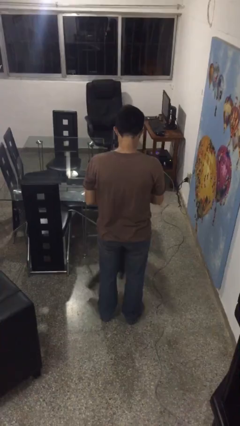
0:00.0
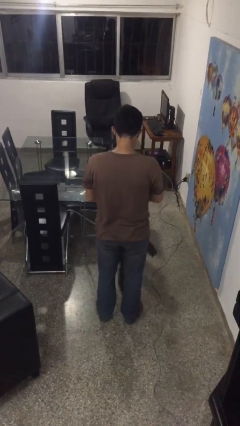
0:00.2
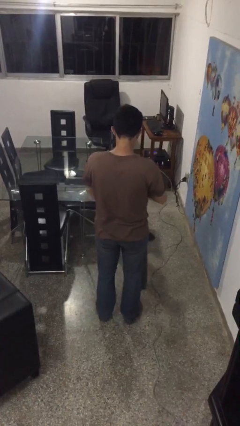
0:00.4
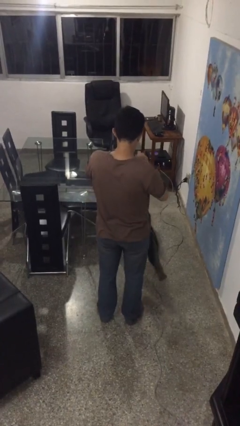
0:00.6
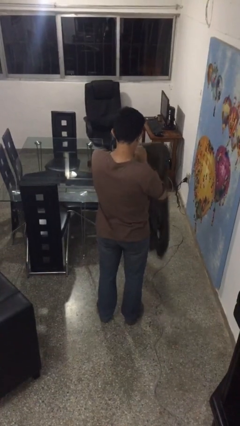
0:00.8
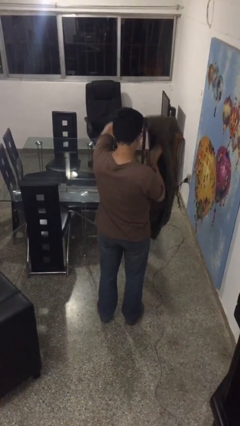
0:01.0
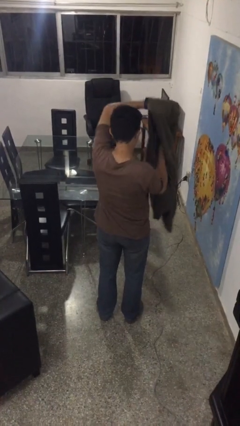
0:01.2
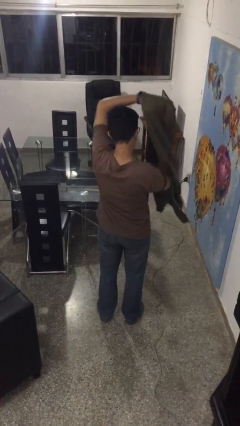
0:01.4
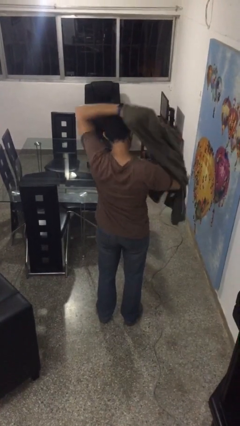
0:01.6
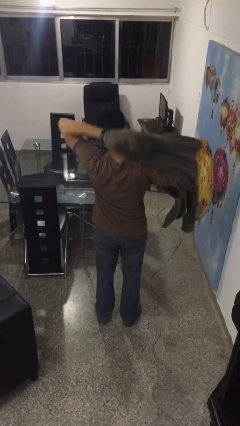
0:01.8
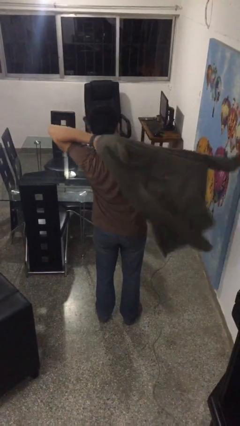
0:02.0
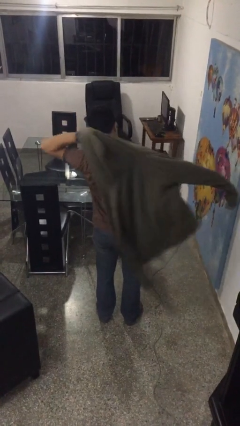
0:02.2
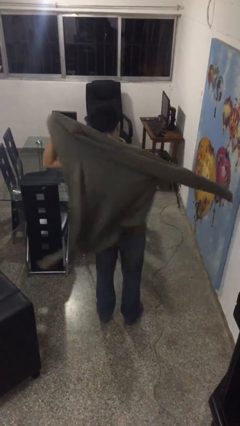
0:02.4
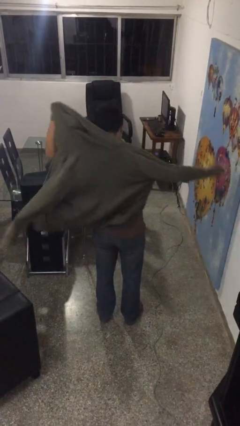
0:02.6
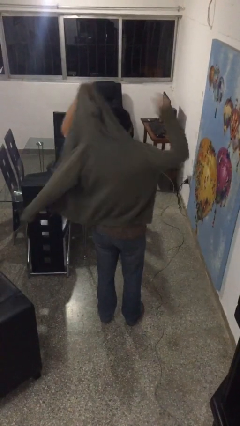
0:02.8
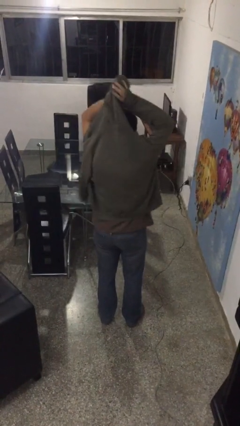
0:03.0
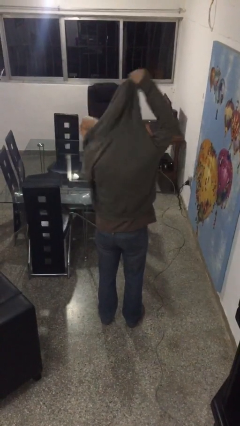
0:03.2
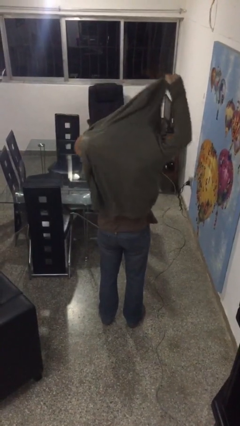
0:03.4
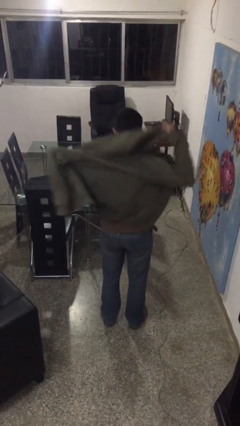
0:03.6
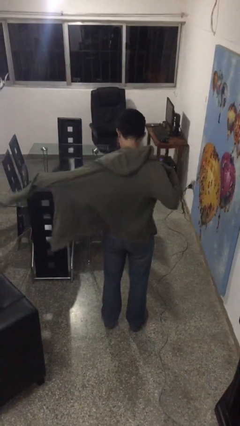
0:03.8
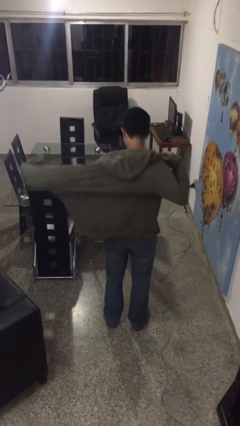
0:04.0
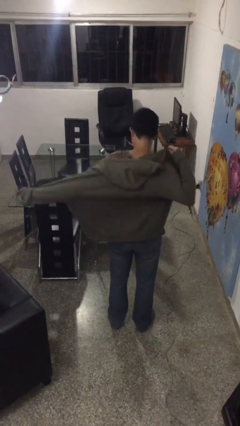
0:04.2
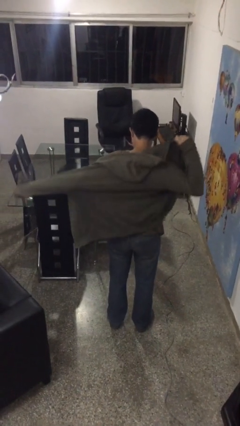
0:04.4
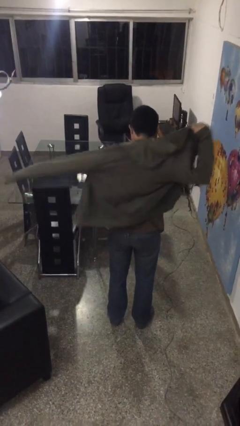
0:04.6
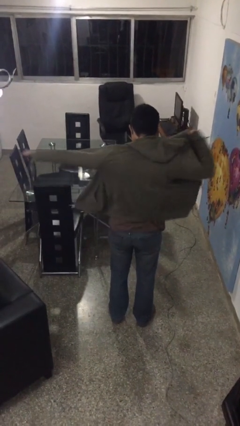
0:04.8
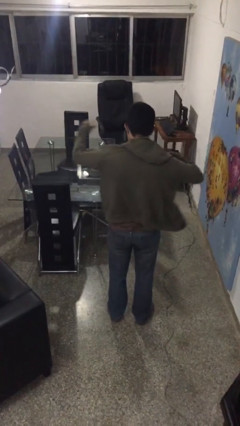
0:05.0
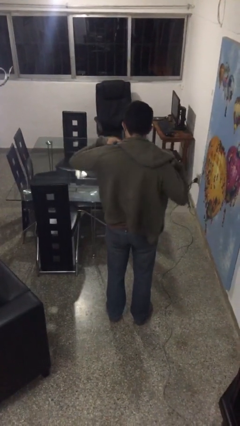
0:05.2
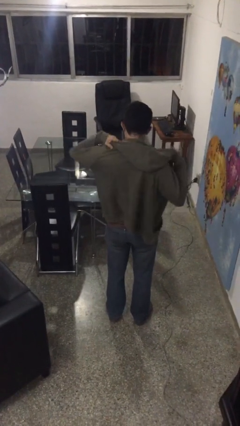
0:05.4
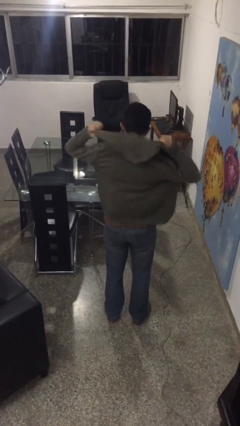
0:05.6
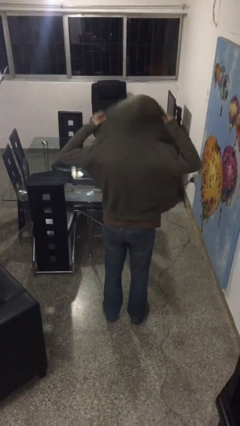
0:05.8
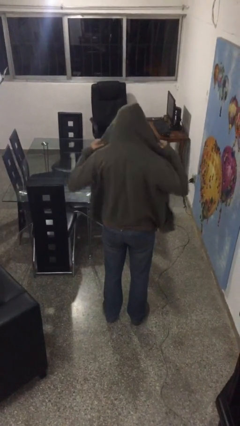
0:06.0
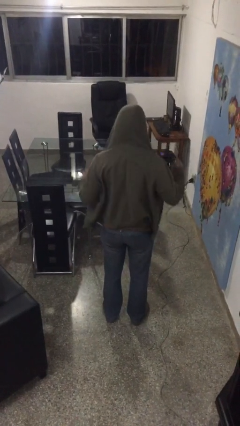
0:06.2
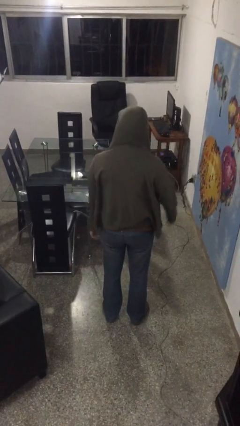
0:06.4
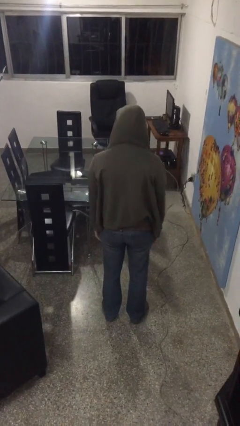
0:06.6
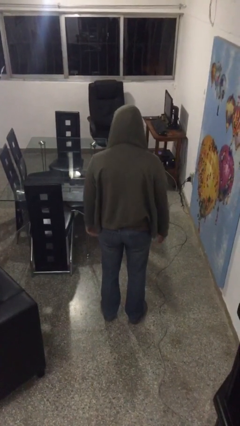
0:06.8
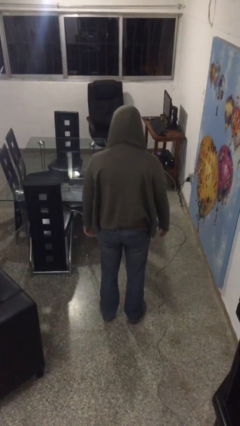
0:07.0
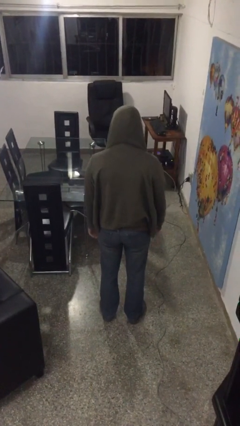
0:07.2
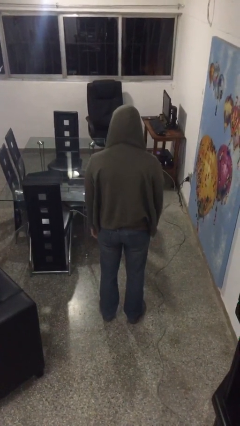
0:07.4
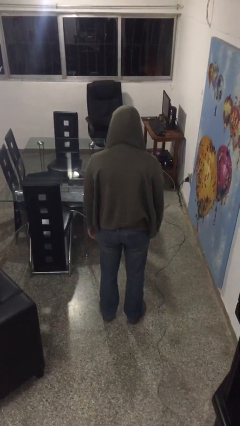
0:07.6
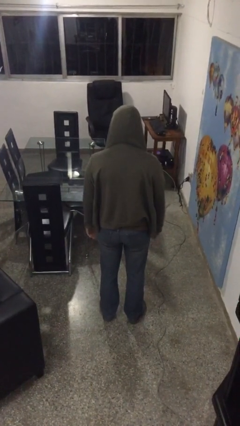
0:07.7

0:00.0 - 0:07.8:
person puts on hoodie

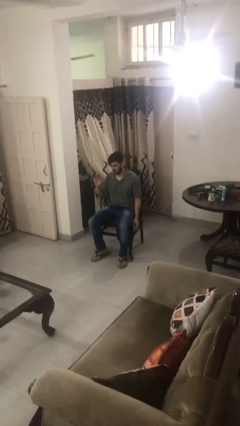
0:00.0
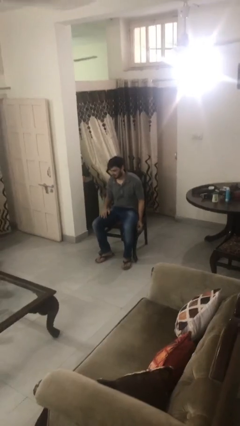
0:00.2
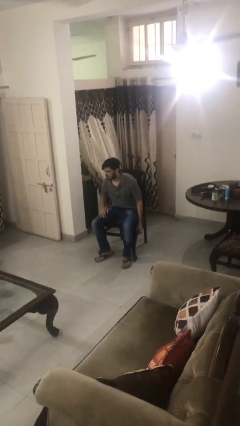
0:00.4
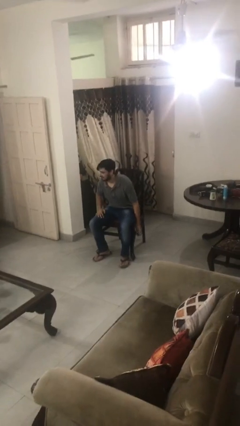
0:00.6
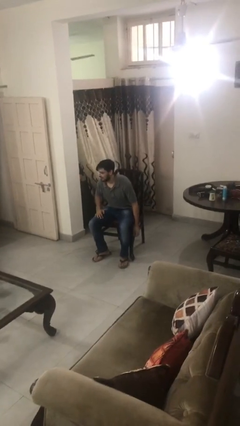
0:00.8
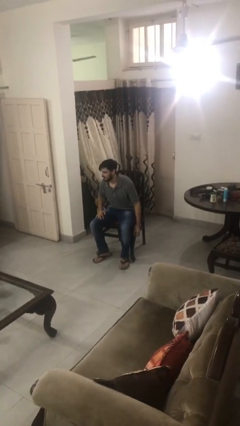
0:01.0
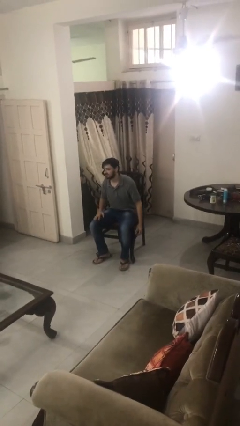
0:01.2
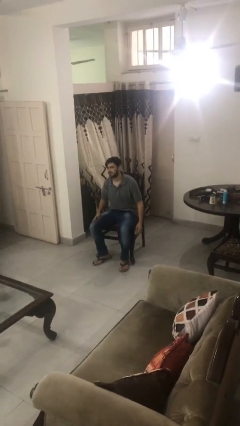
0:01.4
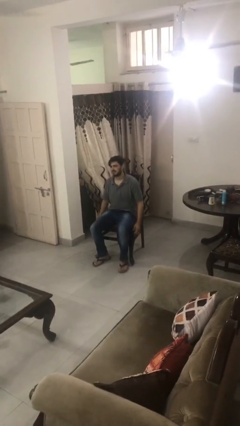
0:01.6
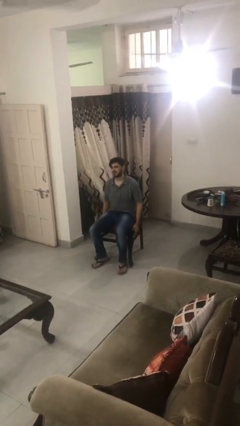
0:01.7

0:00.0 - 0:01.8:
person slaps hands on thighs

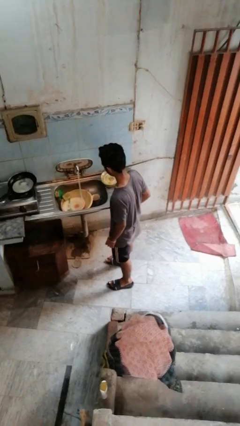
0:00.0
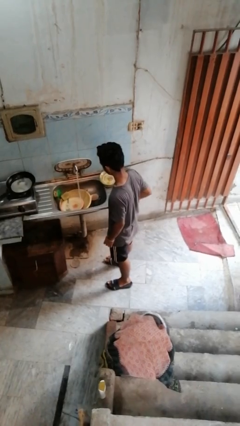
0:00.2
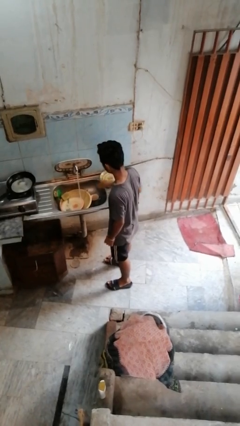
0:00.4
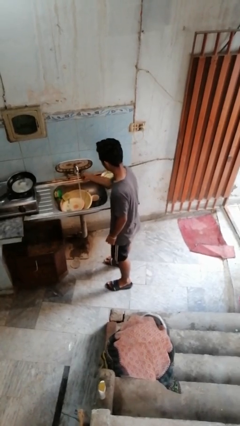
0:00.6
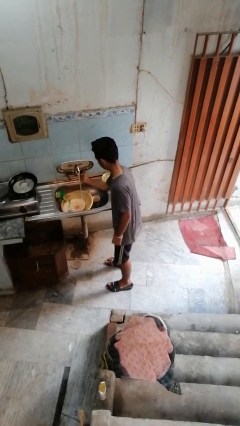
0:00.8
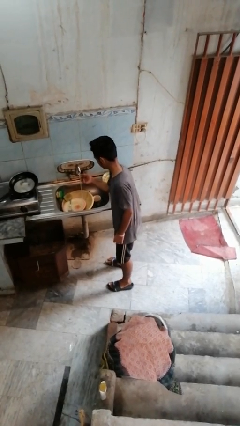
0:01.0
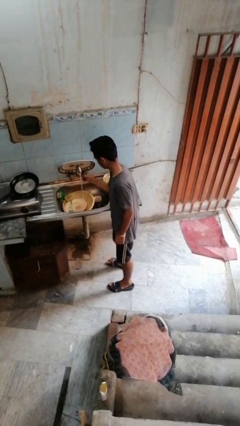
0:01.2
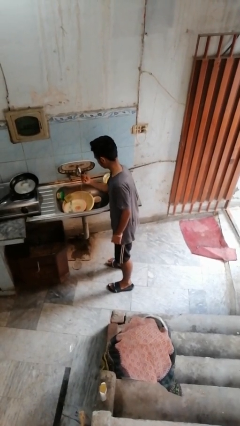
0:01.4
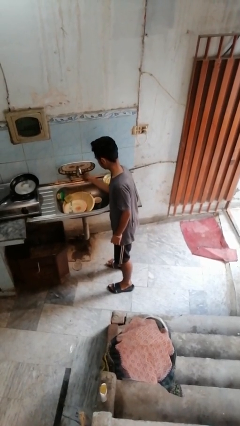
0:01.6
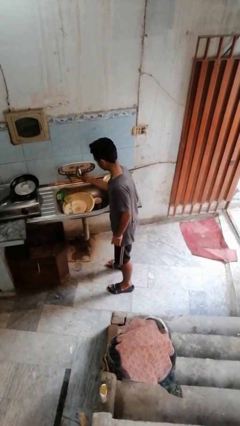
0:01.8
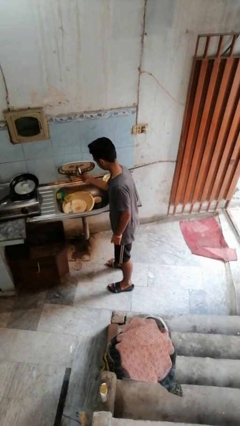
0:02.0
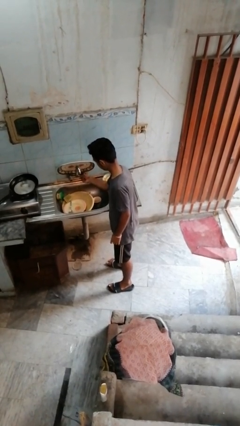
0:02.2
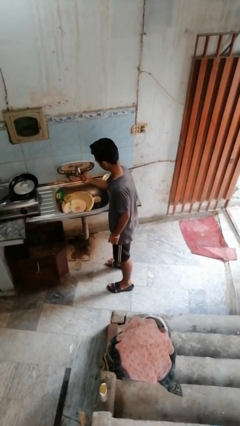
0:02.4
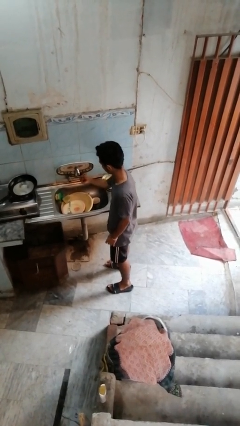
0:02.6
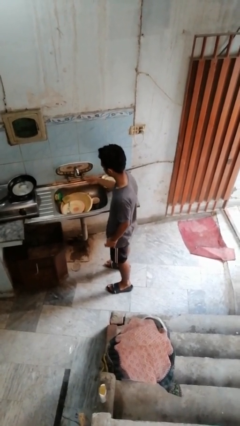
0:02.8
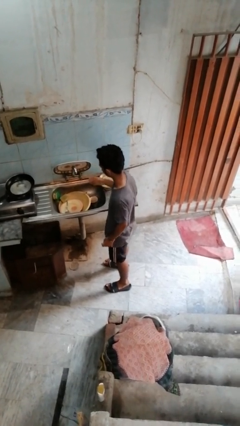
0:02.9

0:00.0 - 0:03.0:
person turns off faucet

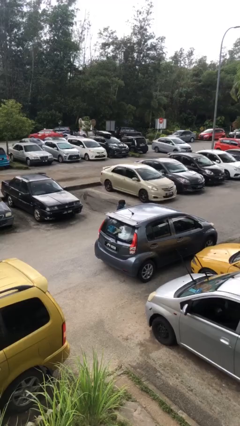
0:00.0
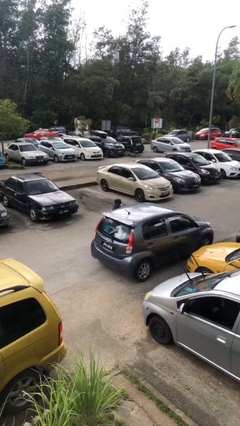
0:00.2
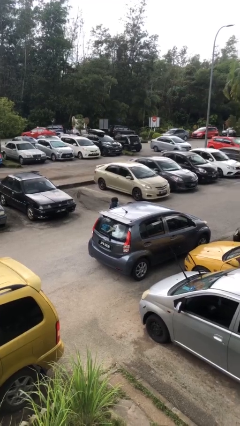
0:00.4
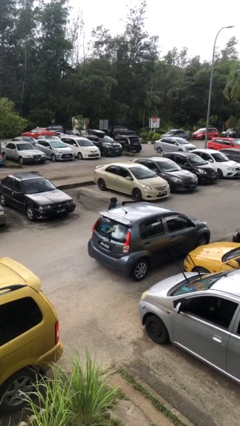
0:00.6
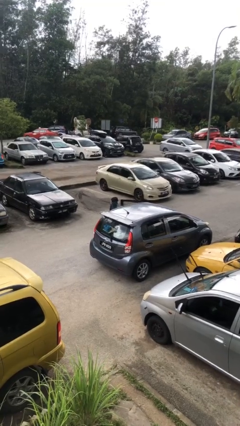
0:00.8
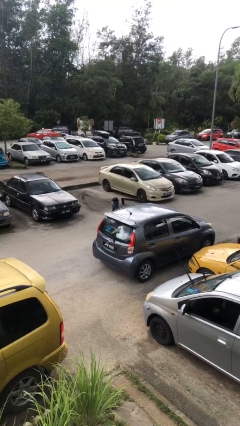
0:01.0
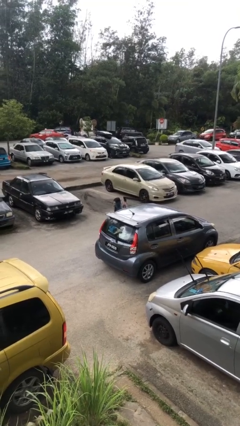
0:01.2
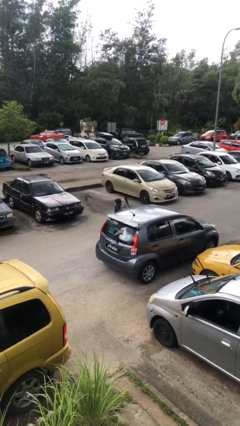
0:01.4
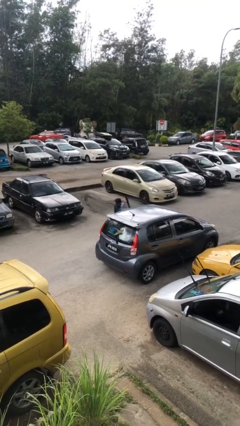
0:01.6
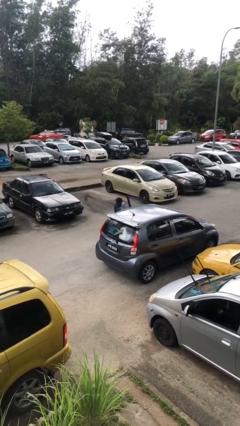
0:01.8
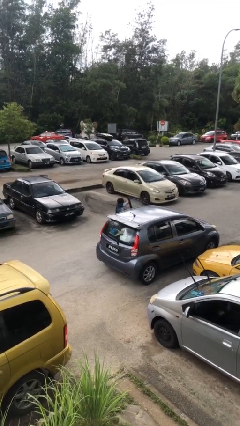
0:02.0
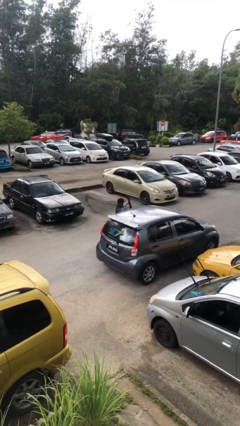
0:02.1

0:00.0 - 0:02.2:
person opens car door

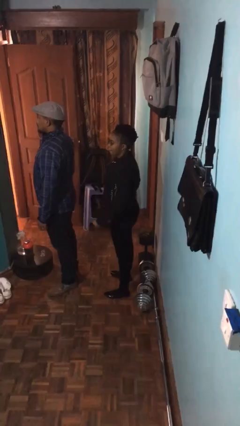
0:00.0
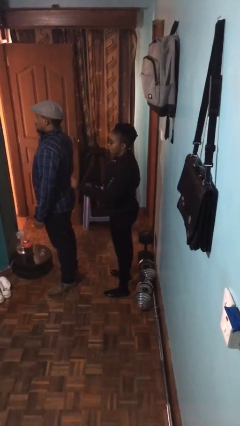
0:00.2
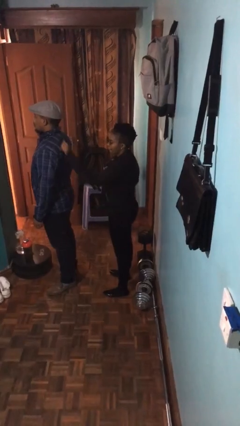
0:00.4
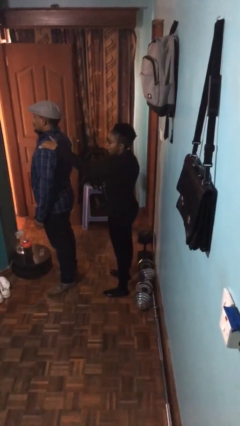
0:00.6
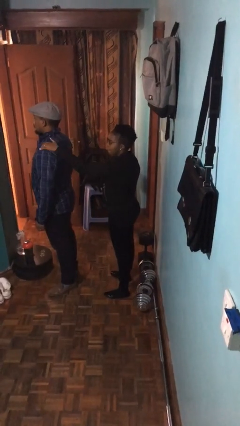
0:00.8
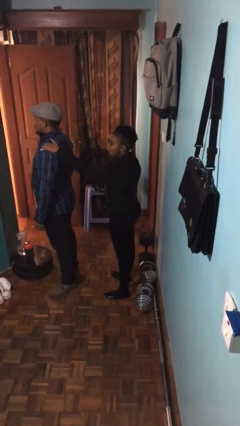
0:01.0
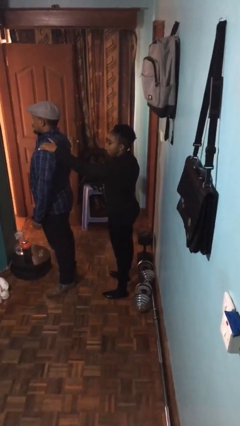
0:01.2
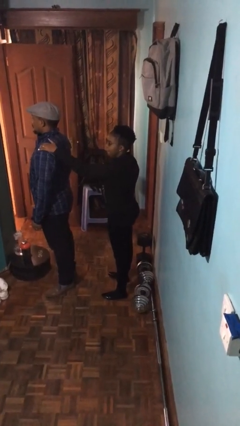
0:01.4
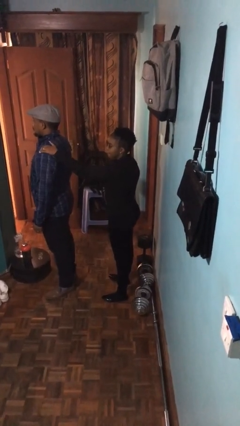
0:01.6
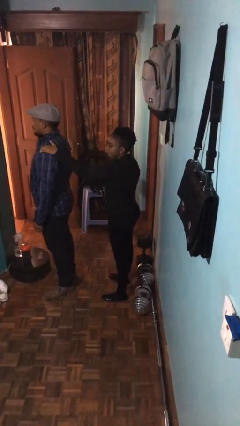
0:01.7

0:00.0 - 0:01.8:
person grabs person by shoulder

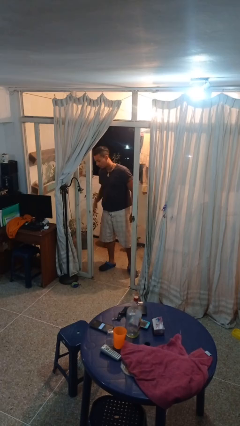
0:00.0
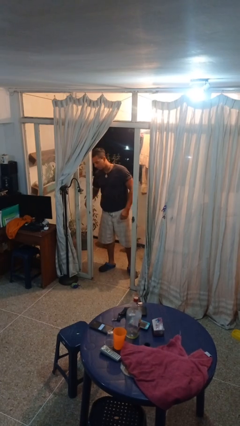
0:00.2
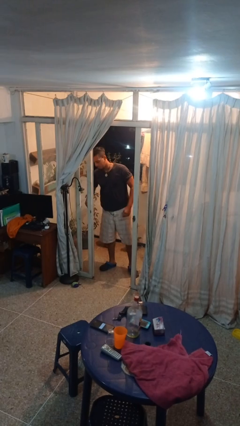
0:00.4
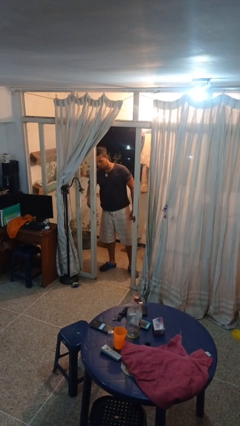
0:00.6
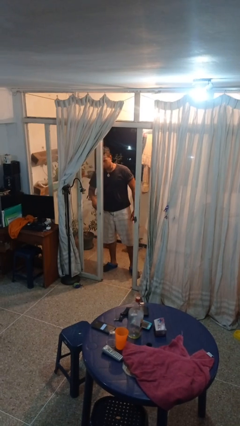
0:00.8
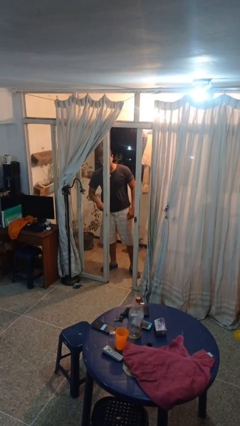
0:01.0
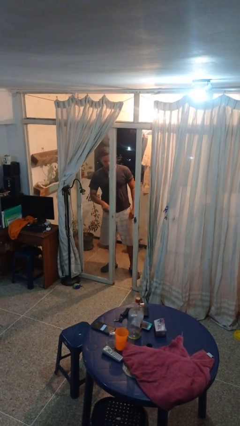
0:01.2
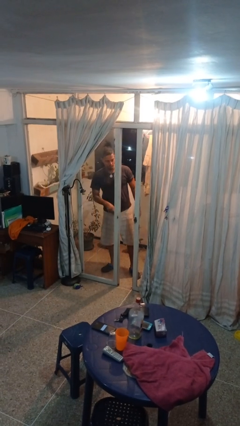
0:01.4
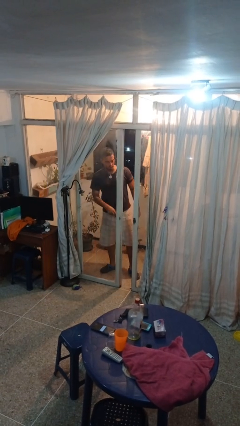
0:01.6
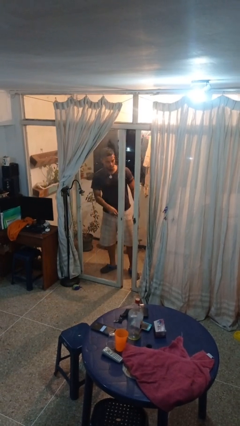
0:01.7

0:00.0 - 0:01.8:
person closes sliding door
